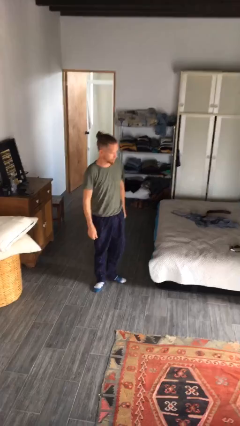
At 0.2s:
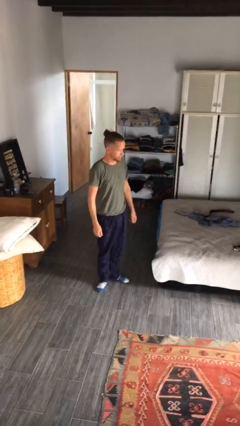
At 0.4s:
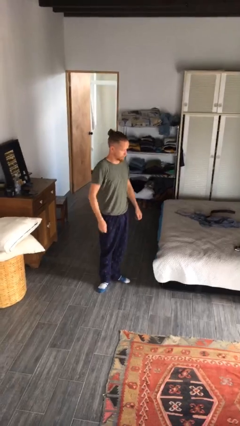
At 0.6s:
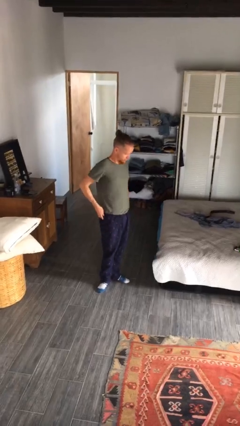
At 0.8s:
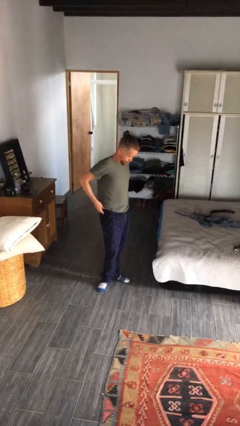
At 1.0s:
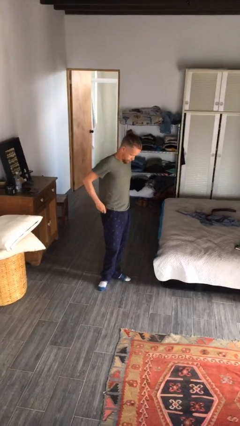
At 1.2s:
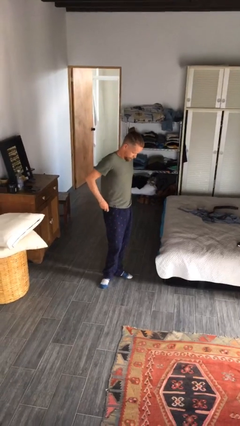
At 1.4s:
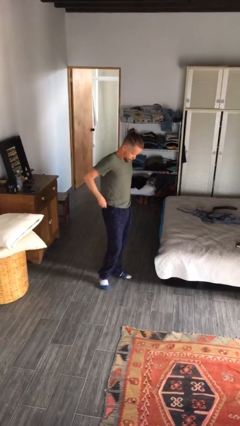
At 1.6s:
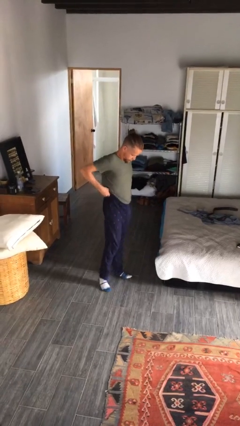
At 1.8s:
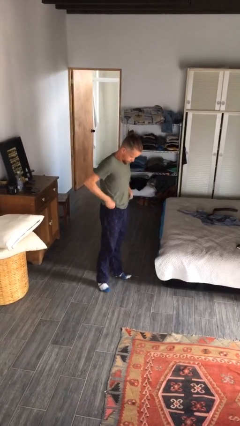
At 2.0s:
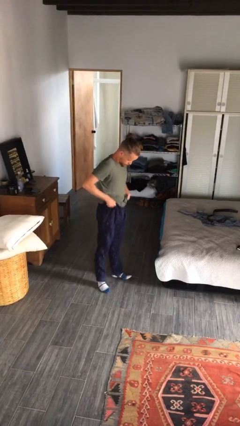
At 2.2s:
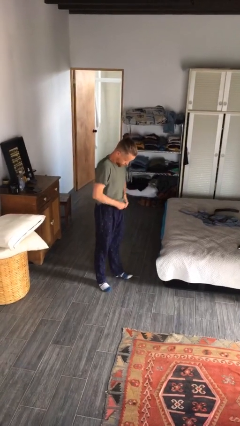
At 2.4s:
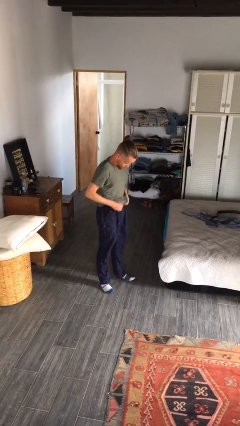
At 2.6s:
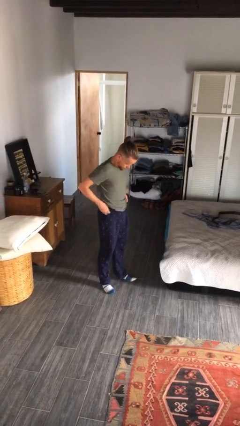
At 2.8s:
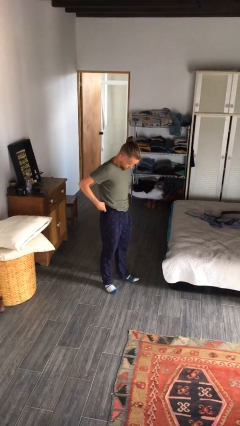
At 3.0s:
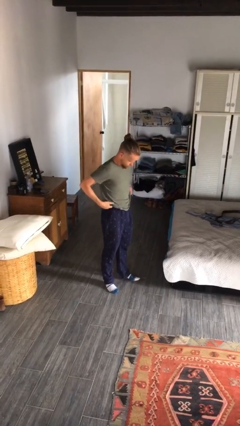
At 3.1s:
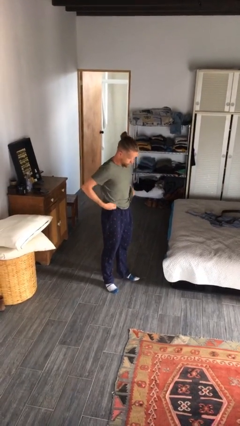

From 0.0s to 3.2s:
person hikes up pants

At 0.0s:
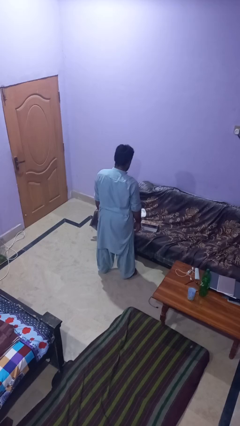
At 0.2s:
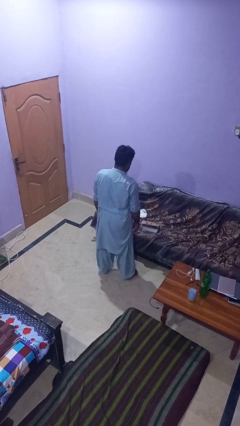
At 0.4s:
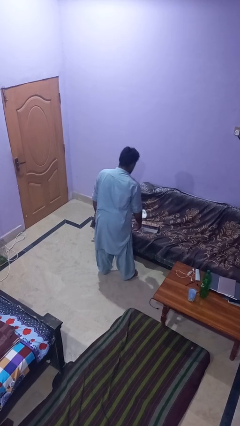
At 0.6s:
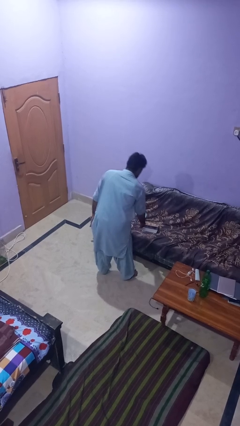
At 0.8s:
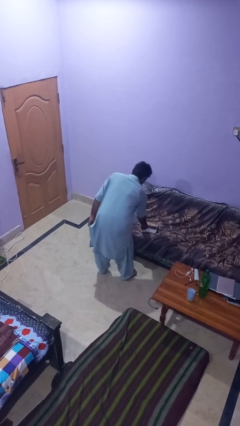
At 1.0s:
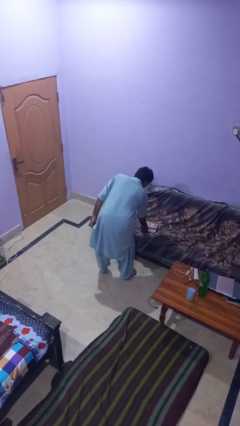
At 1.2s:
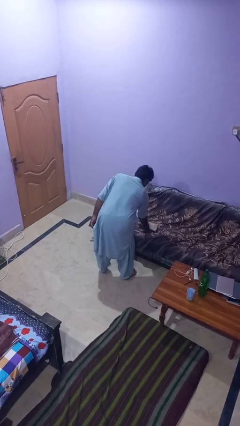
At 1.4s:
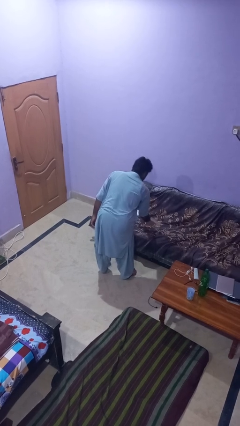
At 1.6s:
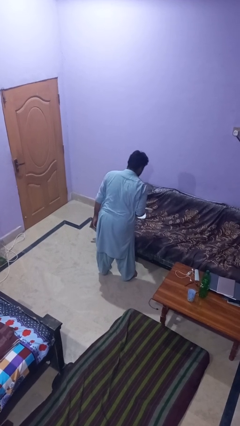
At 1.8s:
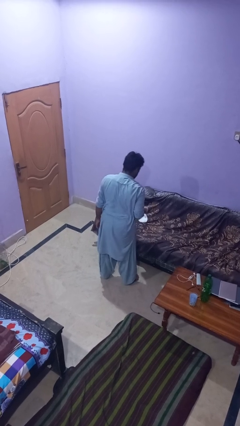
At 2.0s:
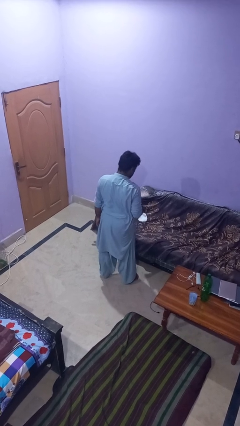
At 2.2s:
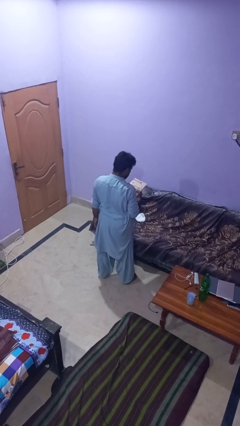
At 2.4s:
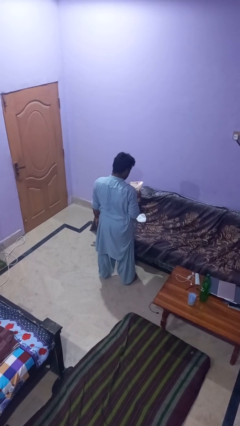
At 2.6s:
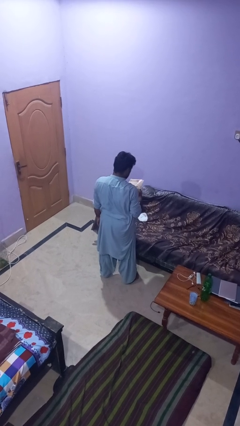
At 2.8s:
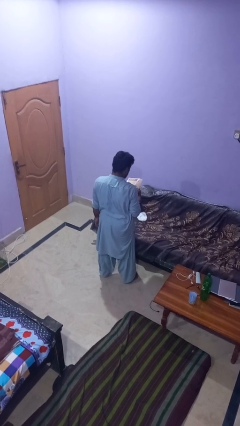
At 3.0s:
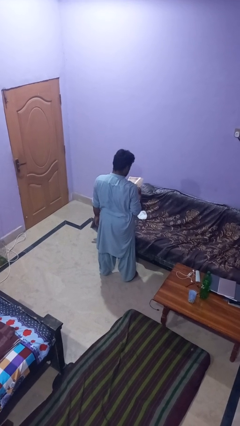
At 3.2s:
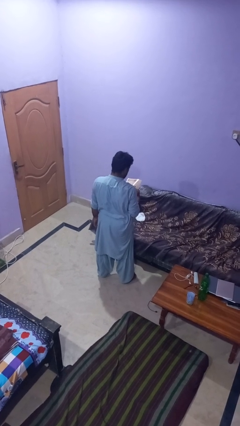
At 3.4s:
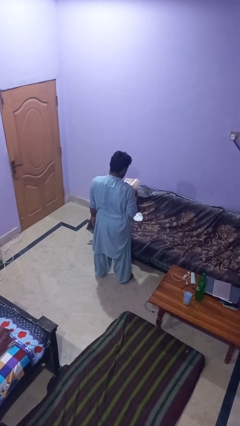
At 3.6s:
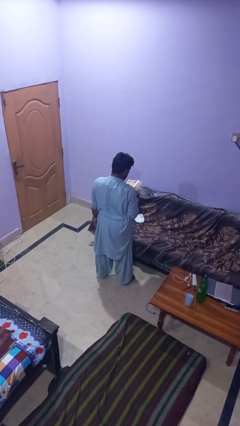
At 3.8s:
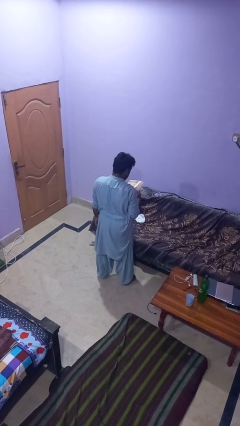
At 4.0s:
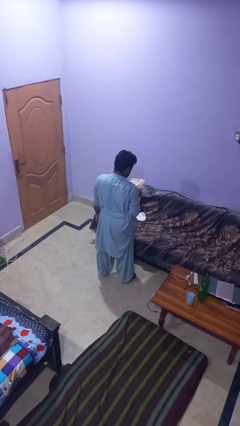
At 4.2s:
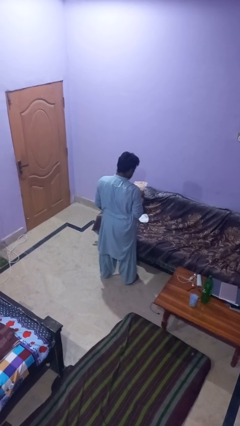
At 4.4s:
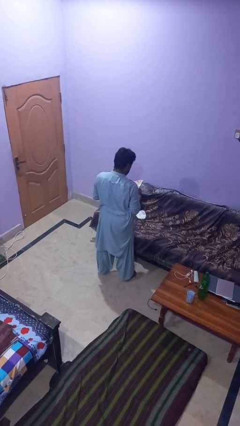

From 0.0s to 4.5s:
person picks up object from couch

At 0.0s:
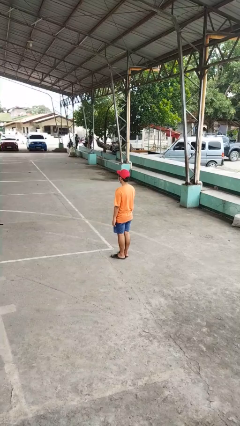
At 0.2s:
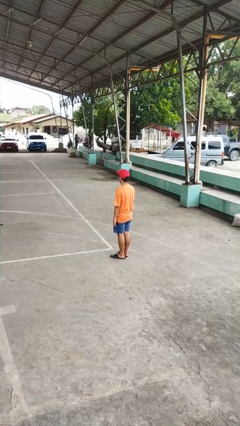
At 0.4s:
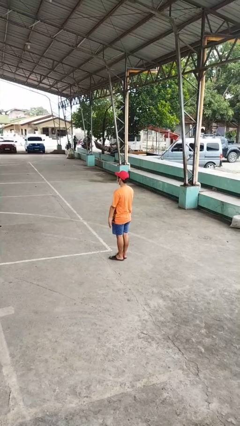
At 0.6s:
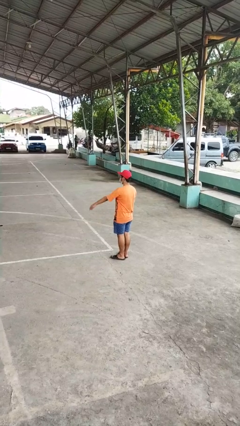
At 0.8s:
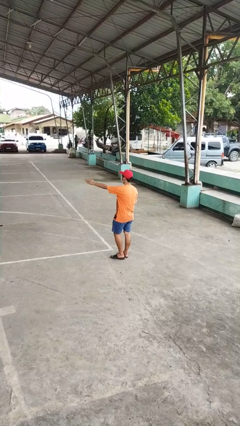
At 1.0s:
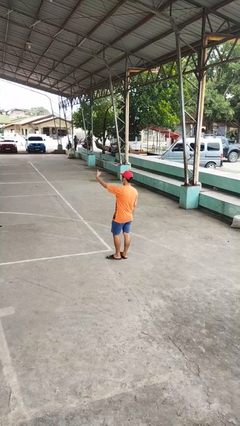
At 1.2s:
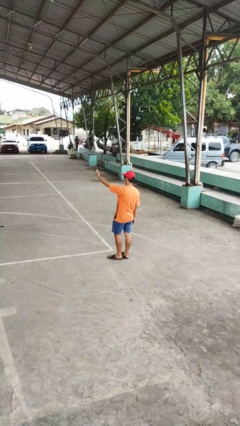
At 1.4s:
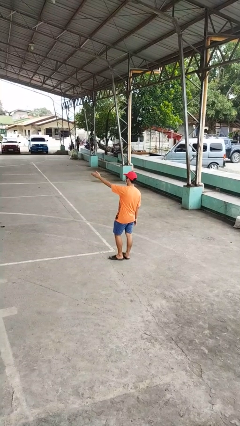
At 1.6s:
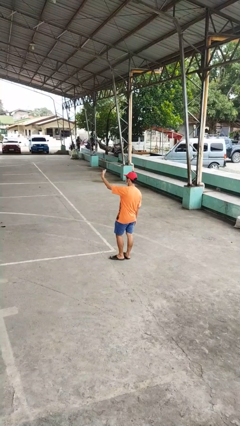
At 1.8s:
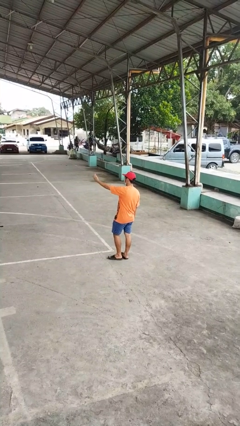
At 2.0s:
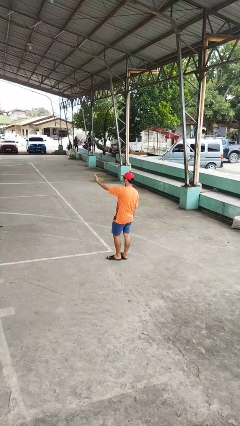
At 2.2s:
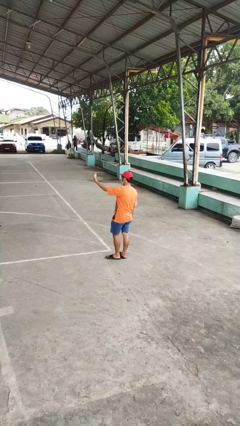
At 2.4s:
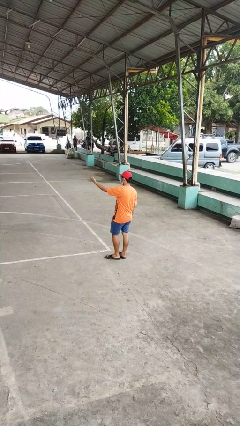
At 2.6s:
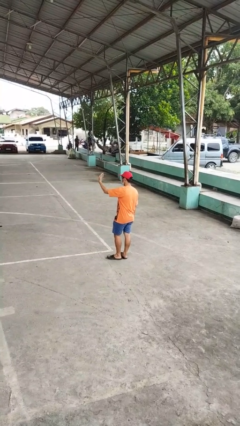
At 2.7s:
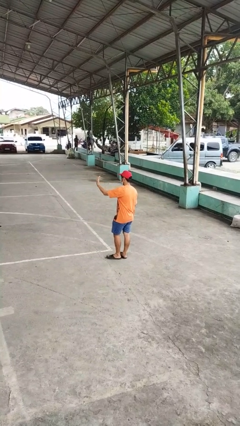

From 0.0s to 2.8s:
person gestures come here

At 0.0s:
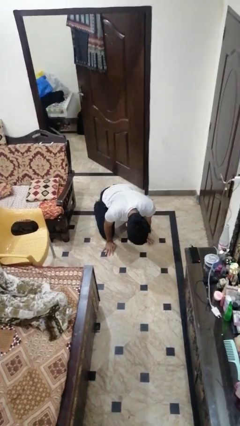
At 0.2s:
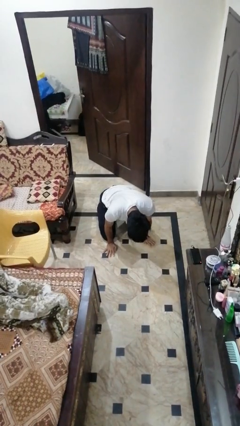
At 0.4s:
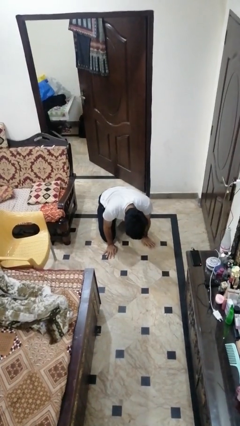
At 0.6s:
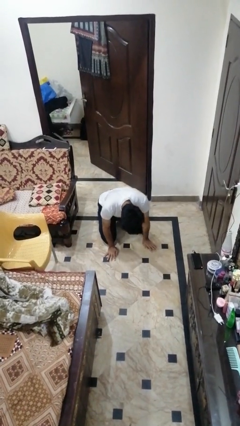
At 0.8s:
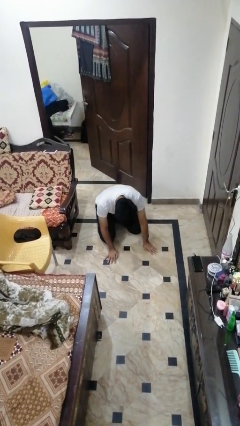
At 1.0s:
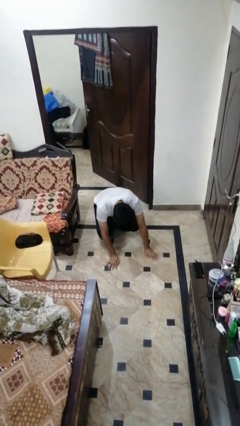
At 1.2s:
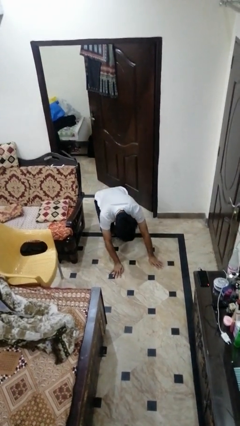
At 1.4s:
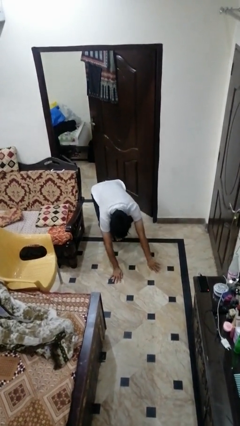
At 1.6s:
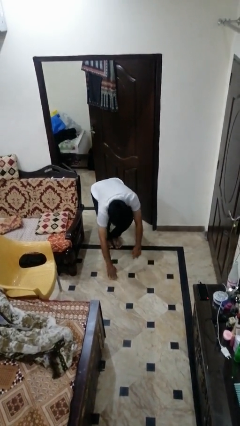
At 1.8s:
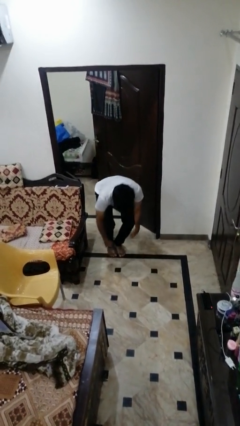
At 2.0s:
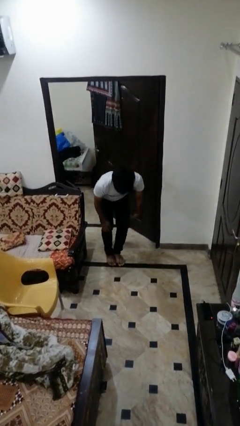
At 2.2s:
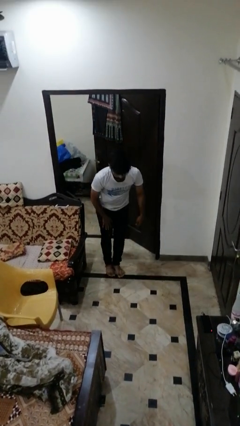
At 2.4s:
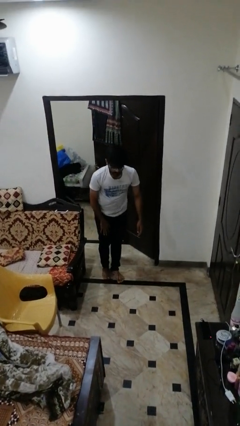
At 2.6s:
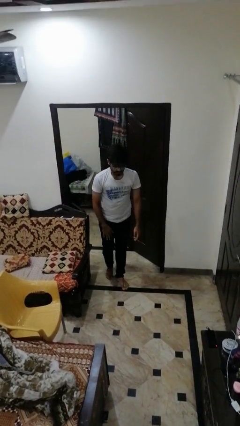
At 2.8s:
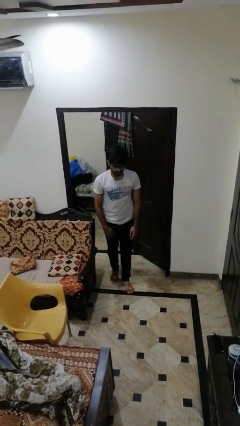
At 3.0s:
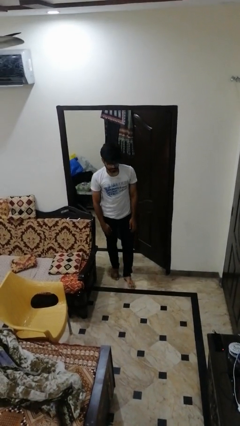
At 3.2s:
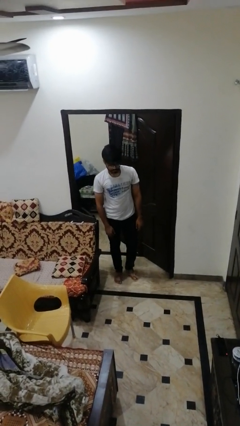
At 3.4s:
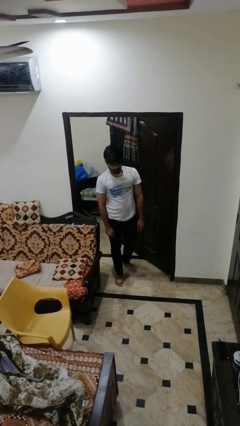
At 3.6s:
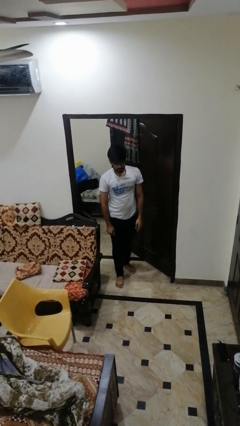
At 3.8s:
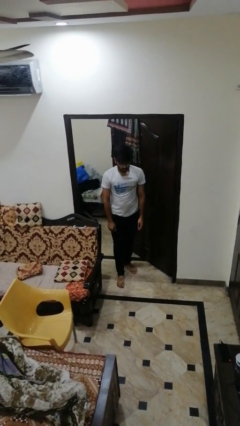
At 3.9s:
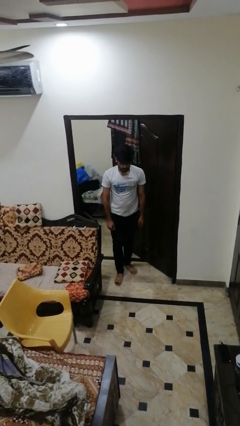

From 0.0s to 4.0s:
person stands up from floor

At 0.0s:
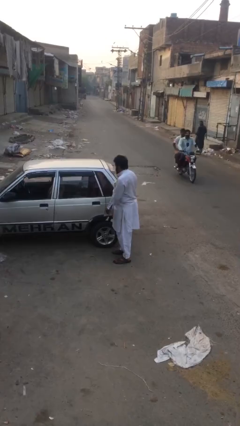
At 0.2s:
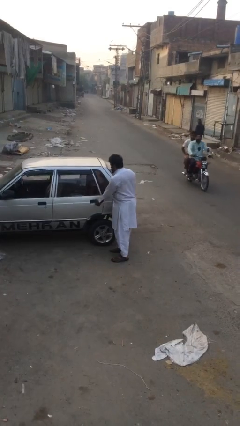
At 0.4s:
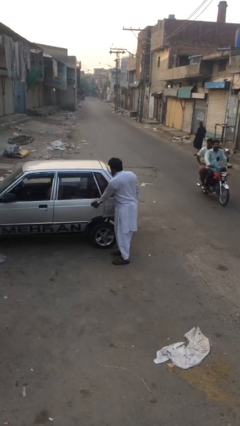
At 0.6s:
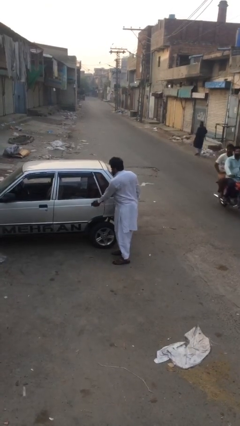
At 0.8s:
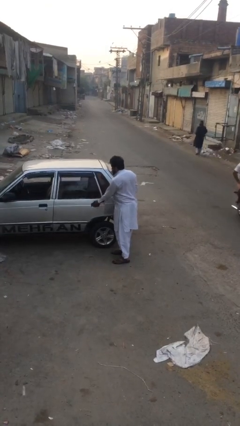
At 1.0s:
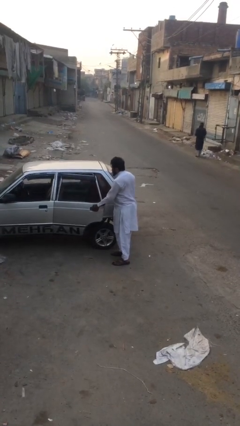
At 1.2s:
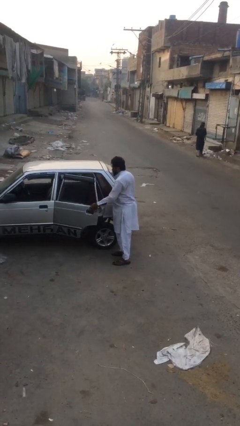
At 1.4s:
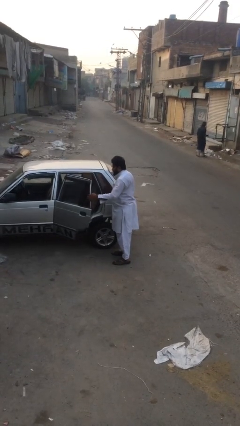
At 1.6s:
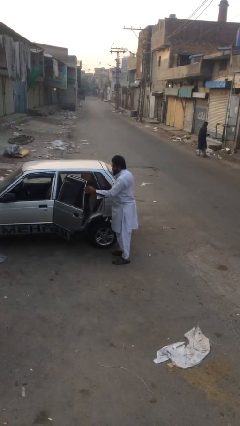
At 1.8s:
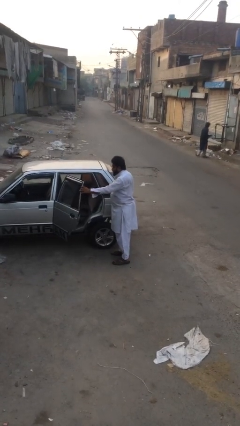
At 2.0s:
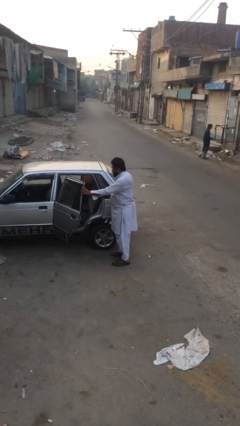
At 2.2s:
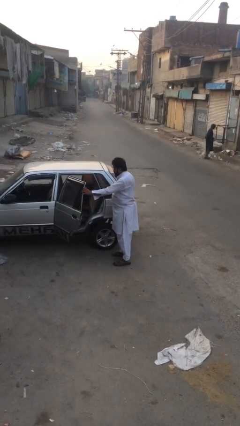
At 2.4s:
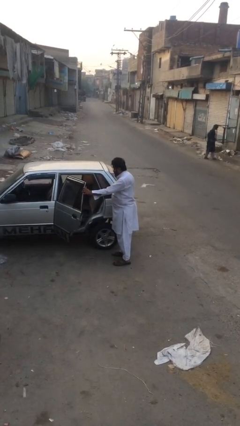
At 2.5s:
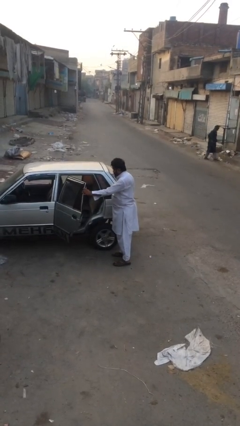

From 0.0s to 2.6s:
person opens car door

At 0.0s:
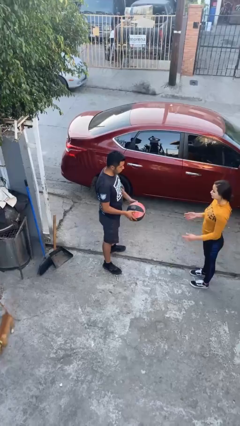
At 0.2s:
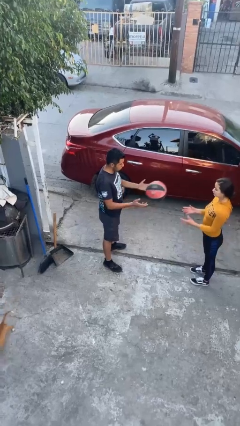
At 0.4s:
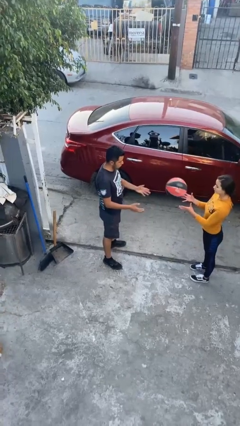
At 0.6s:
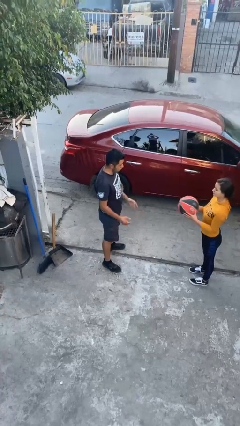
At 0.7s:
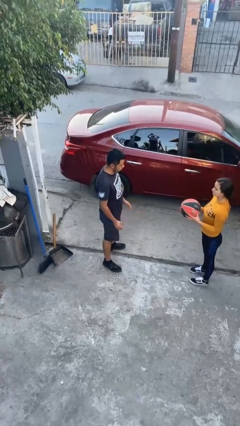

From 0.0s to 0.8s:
person throws object to person
